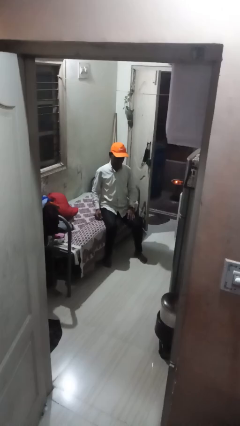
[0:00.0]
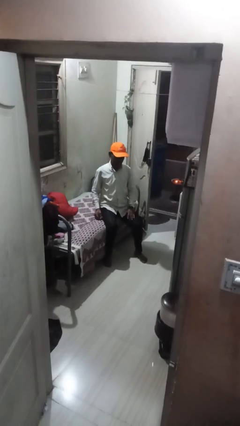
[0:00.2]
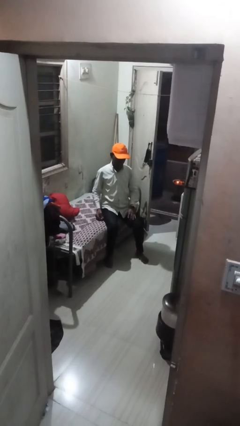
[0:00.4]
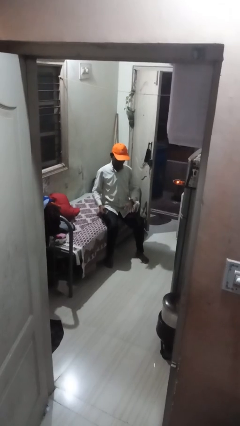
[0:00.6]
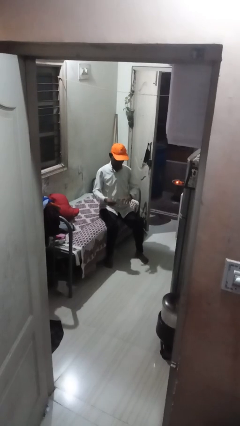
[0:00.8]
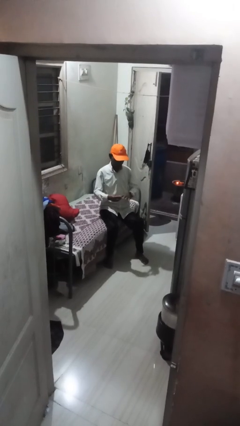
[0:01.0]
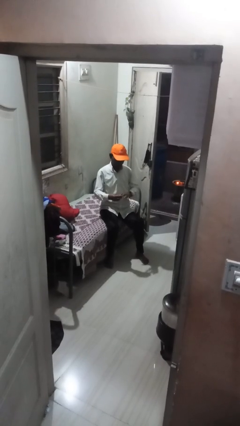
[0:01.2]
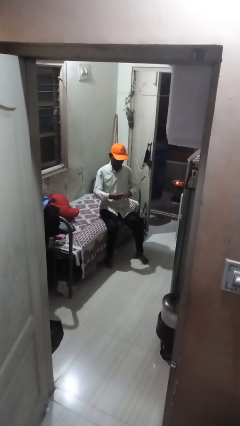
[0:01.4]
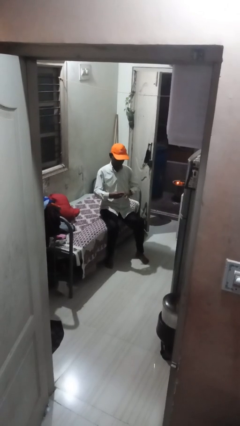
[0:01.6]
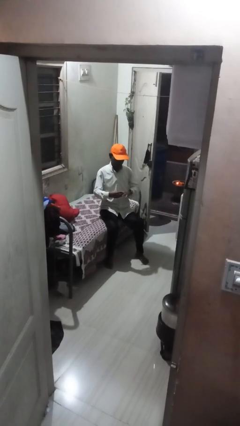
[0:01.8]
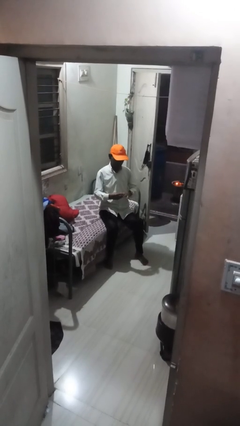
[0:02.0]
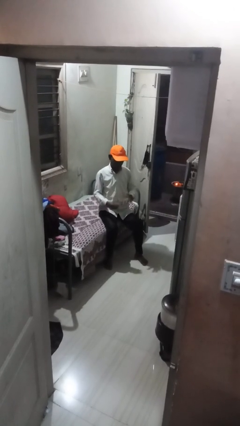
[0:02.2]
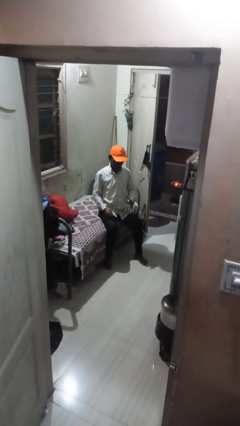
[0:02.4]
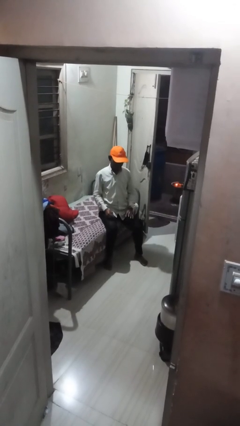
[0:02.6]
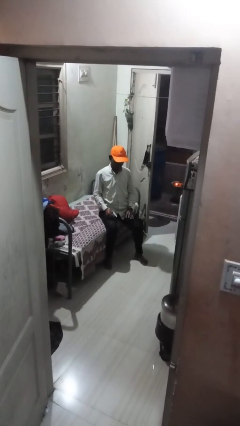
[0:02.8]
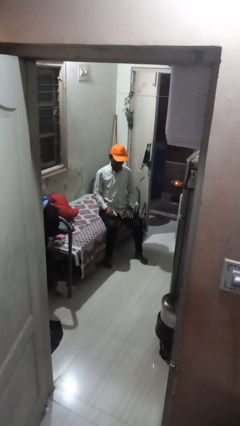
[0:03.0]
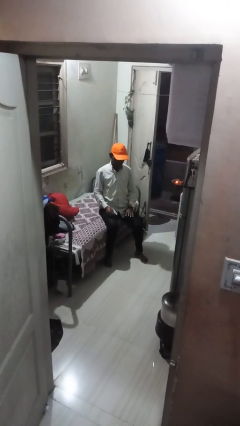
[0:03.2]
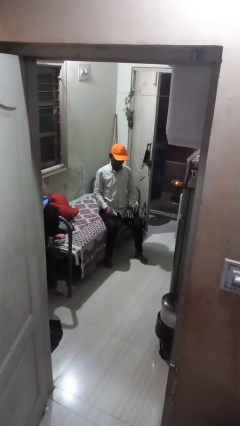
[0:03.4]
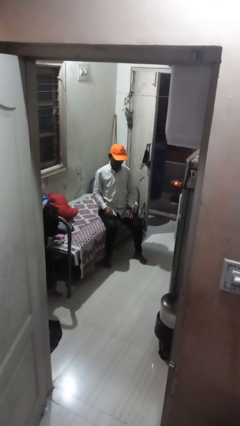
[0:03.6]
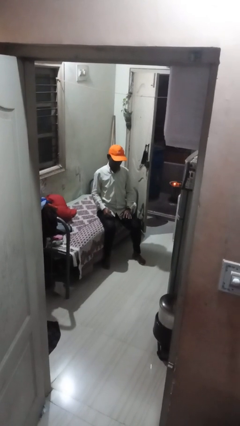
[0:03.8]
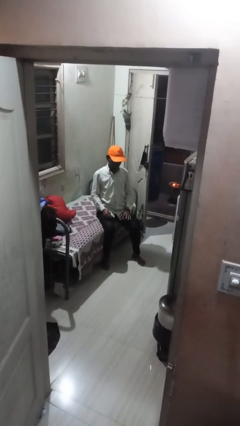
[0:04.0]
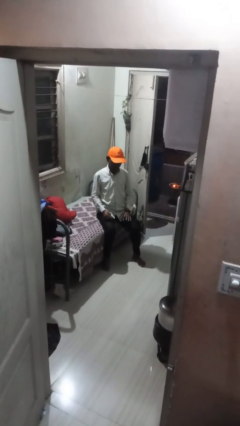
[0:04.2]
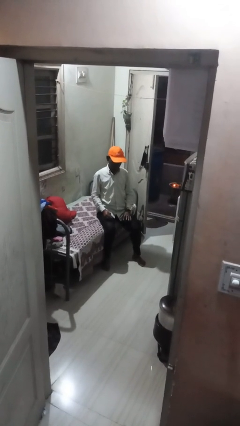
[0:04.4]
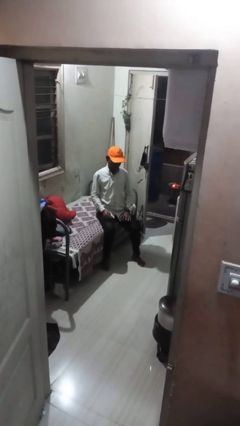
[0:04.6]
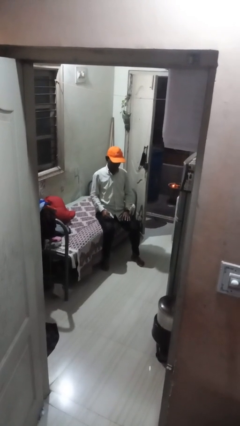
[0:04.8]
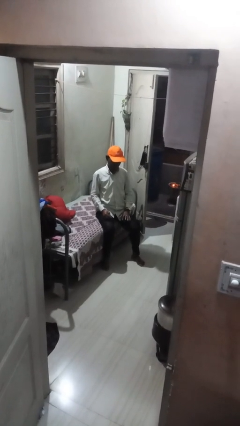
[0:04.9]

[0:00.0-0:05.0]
person puts on ring

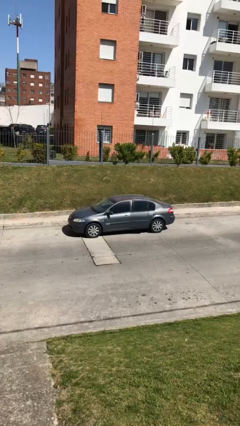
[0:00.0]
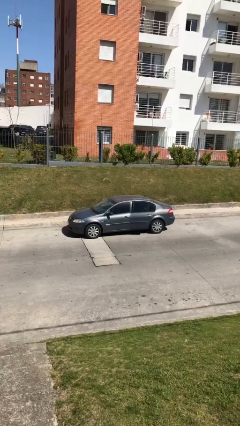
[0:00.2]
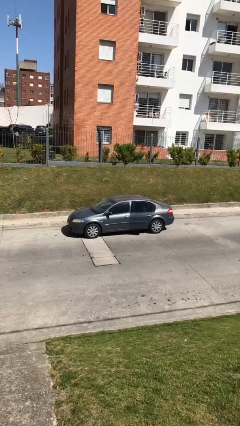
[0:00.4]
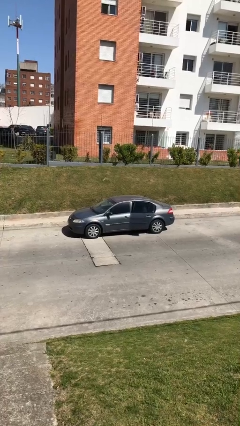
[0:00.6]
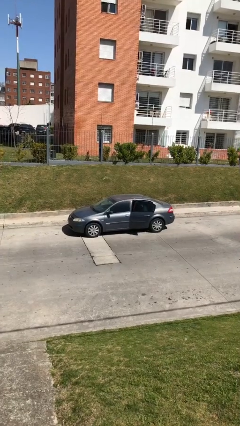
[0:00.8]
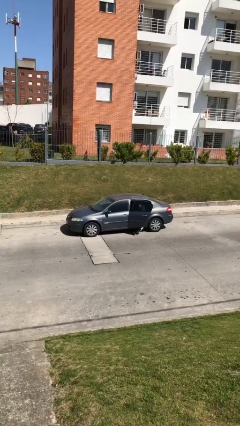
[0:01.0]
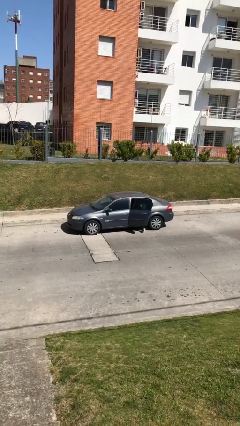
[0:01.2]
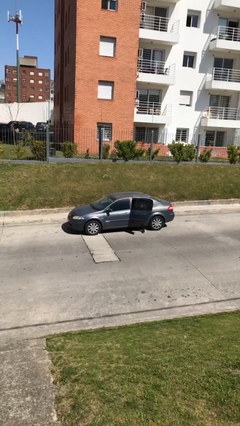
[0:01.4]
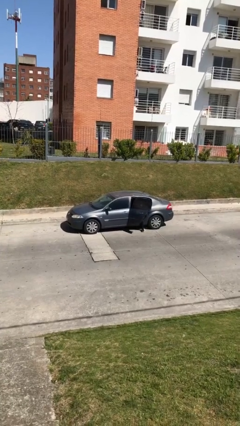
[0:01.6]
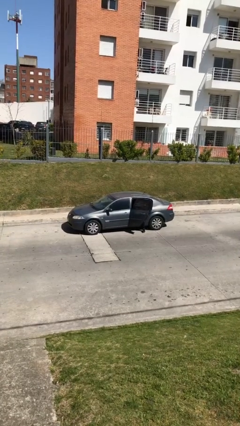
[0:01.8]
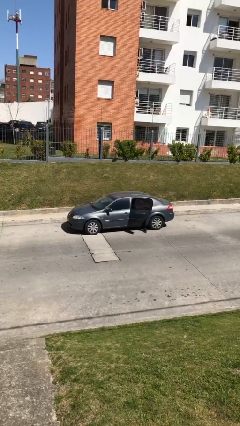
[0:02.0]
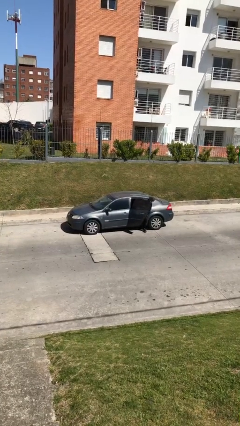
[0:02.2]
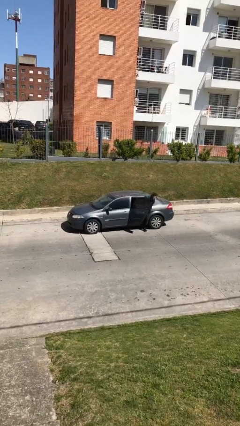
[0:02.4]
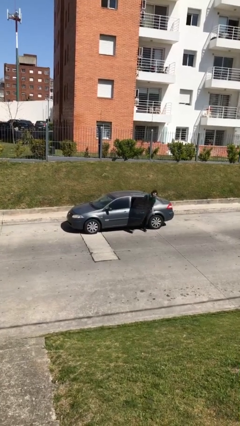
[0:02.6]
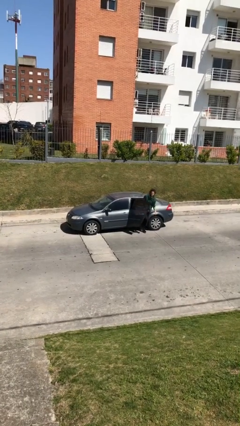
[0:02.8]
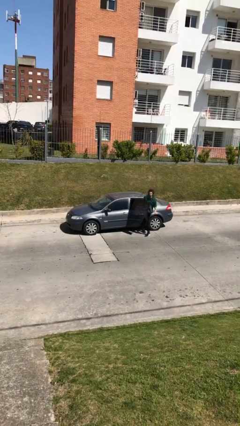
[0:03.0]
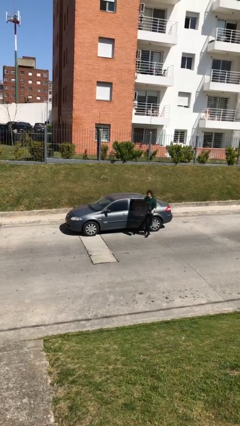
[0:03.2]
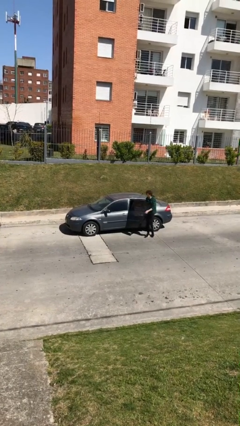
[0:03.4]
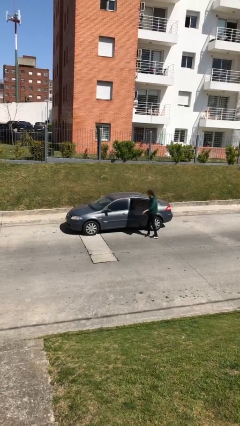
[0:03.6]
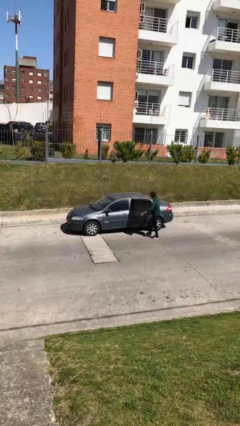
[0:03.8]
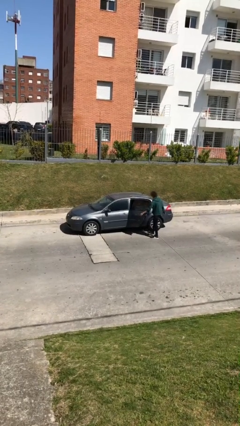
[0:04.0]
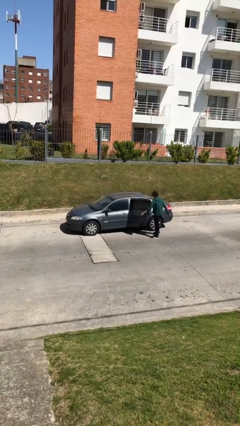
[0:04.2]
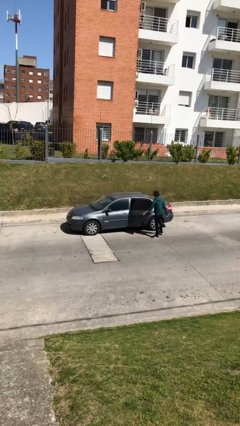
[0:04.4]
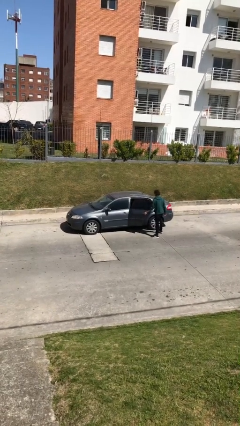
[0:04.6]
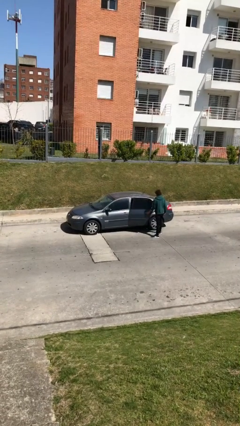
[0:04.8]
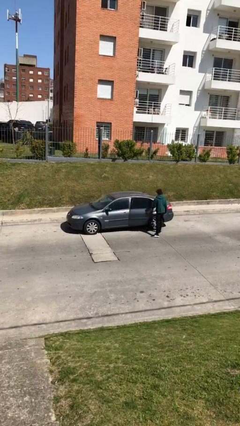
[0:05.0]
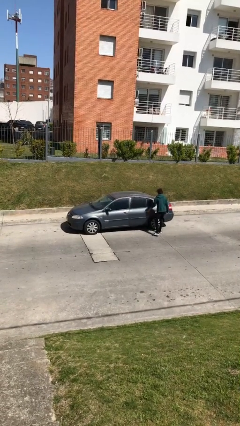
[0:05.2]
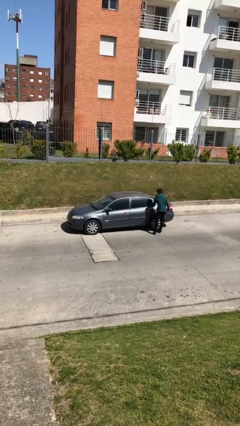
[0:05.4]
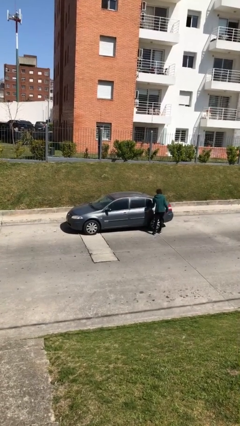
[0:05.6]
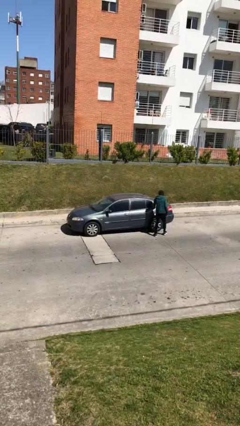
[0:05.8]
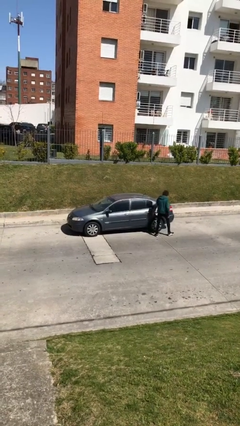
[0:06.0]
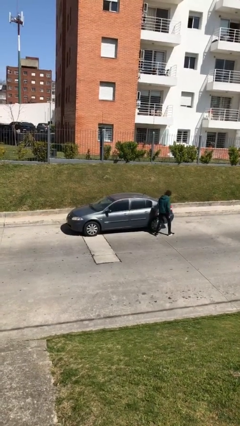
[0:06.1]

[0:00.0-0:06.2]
car drops off person

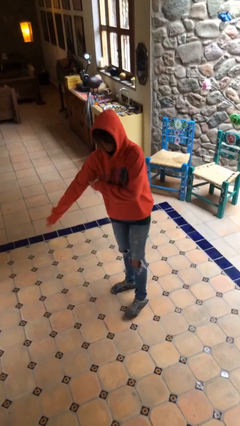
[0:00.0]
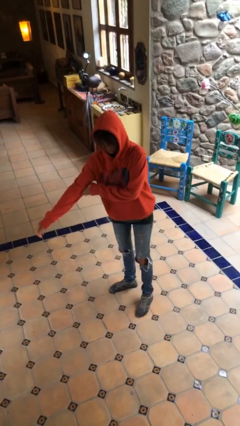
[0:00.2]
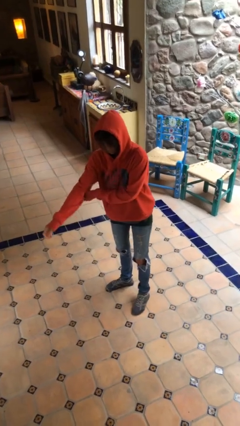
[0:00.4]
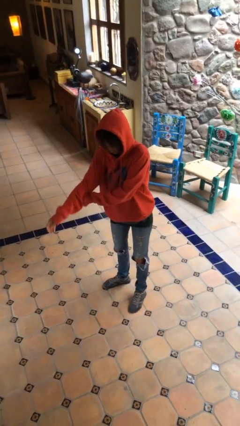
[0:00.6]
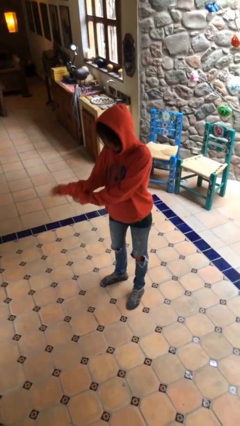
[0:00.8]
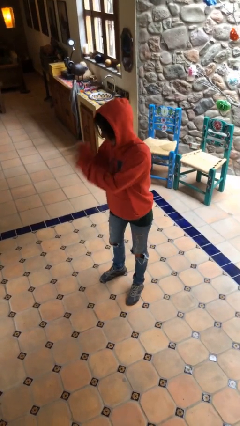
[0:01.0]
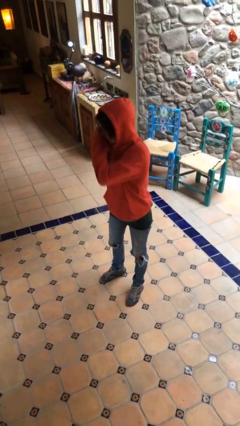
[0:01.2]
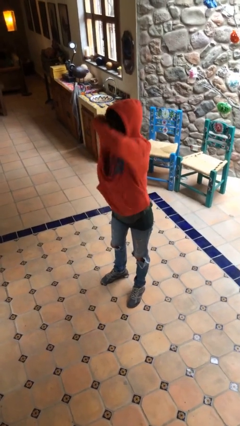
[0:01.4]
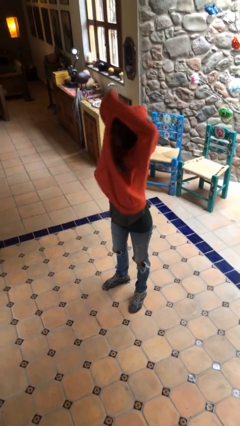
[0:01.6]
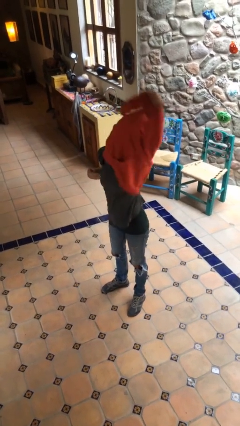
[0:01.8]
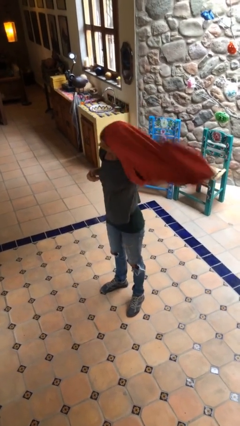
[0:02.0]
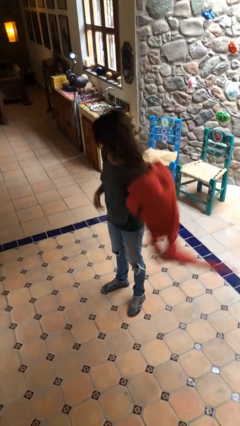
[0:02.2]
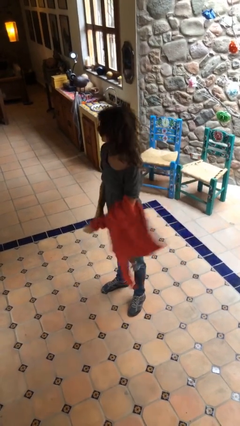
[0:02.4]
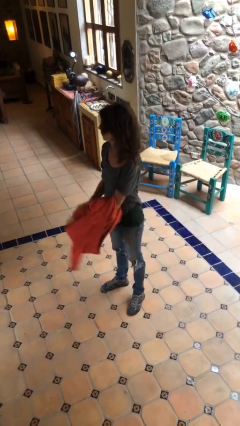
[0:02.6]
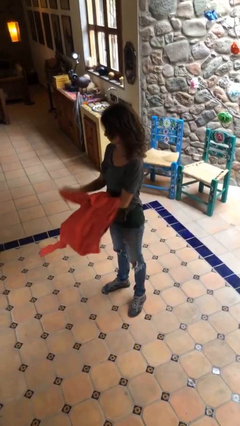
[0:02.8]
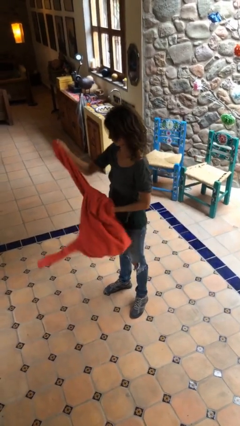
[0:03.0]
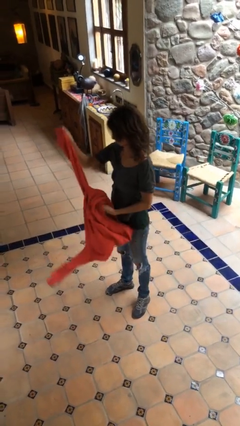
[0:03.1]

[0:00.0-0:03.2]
person takes off hoodie

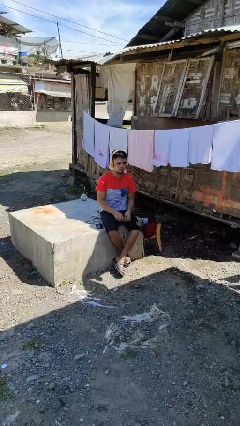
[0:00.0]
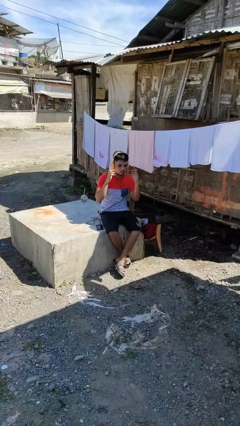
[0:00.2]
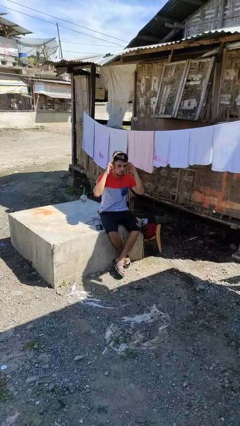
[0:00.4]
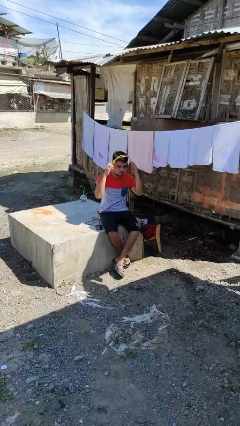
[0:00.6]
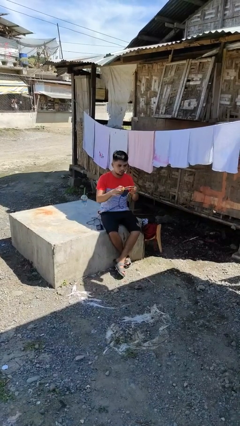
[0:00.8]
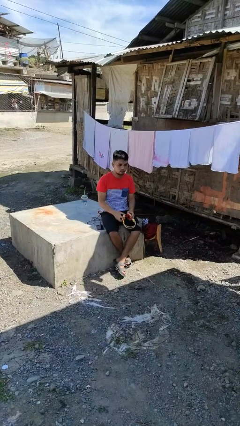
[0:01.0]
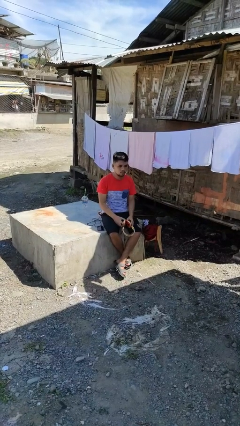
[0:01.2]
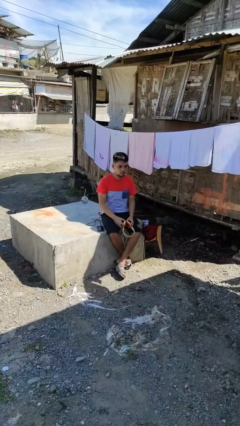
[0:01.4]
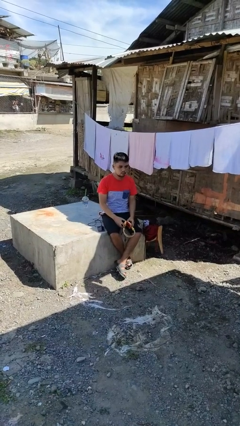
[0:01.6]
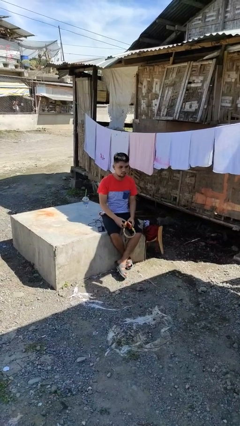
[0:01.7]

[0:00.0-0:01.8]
person takes off headphones

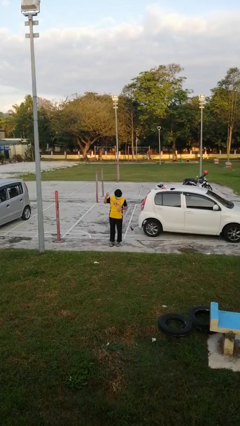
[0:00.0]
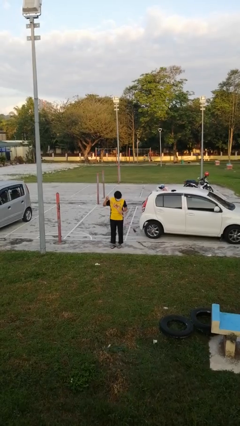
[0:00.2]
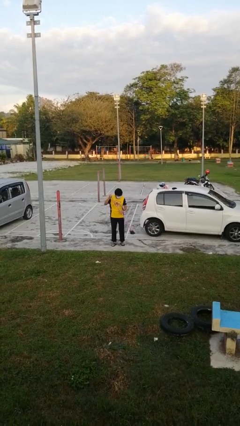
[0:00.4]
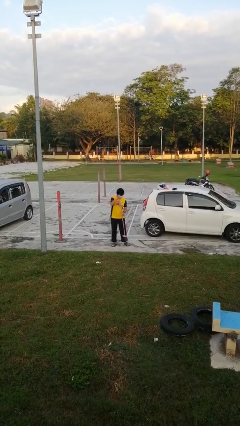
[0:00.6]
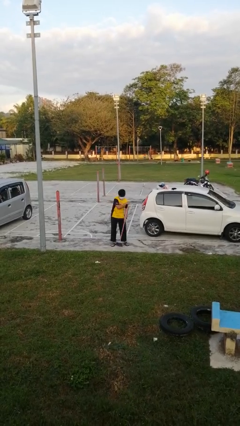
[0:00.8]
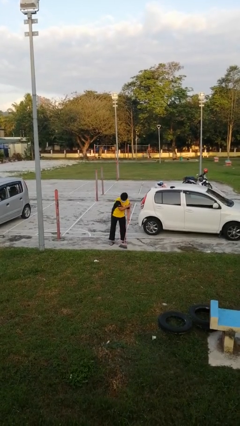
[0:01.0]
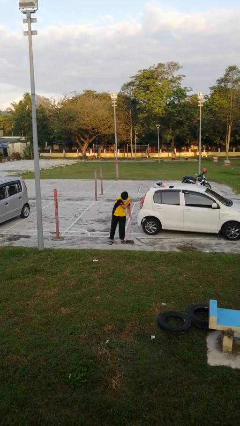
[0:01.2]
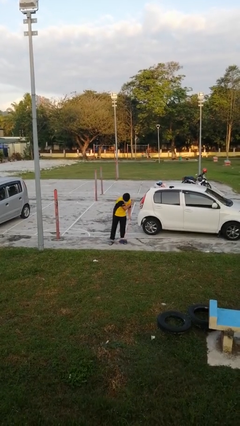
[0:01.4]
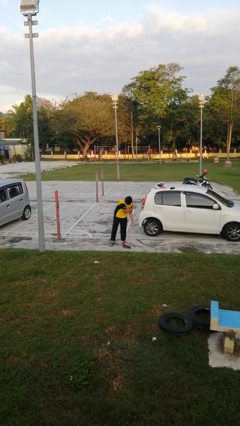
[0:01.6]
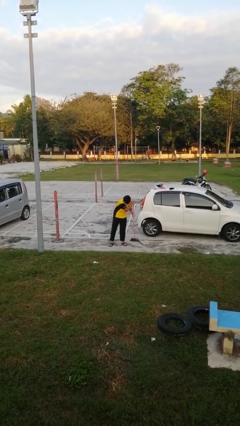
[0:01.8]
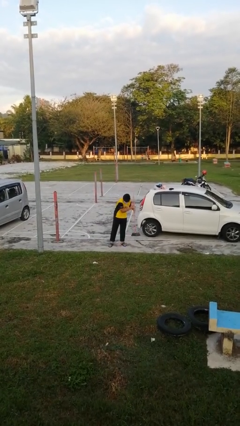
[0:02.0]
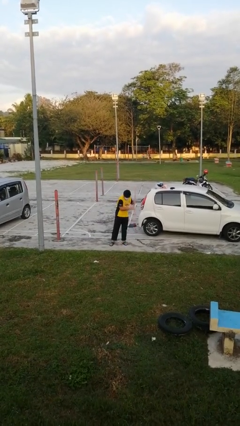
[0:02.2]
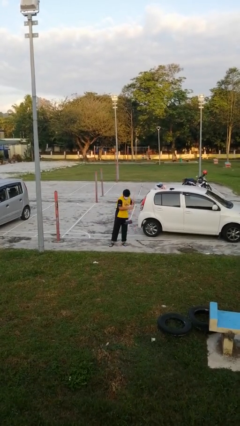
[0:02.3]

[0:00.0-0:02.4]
person sweeps floor
